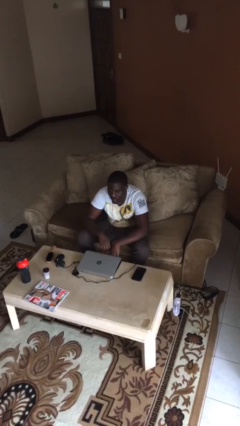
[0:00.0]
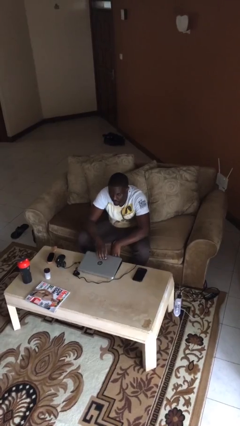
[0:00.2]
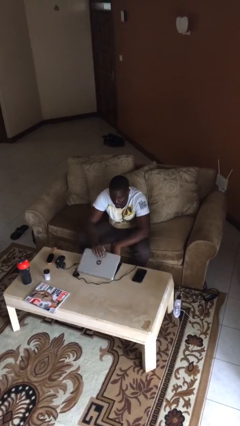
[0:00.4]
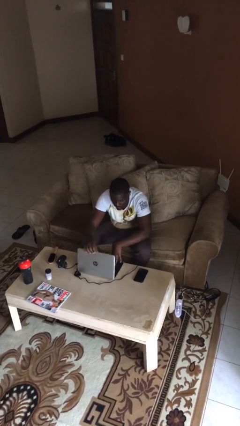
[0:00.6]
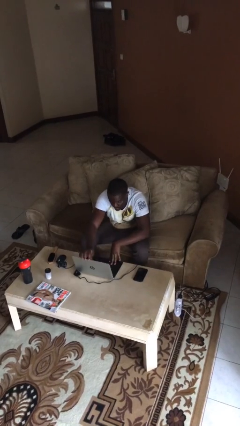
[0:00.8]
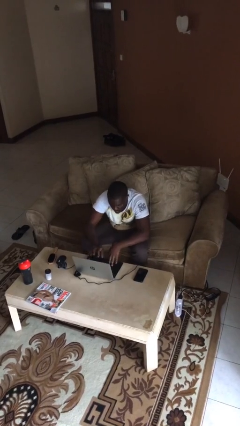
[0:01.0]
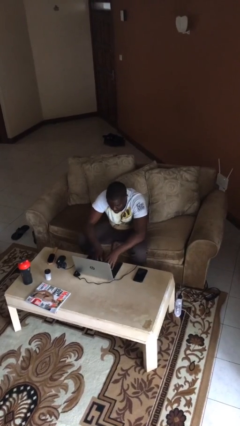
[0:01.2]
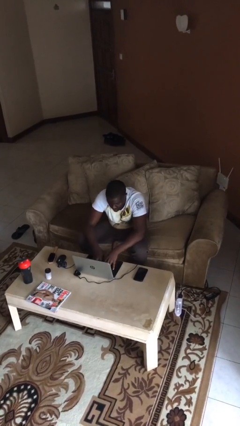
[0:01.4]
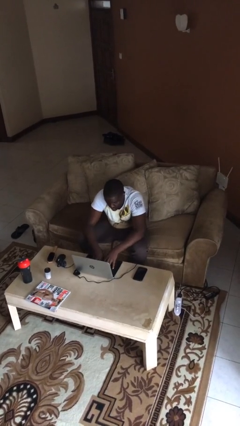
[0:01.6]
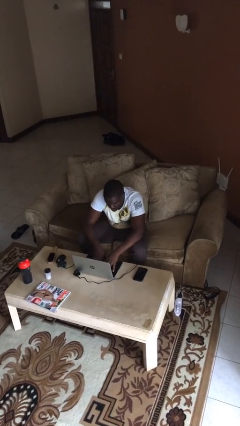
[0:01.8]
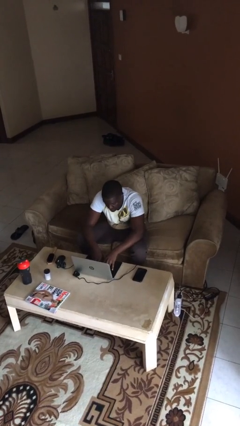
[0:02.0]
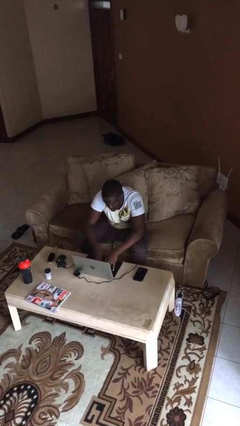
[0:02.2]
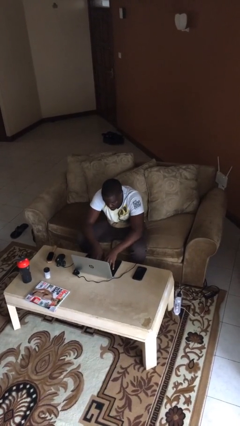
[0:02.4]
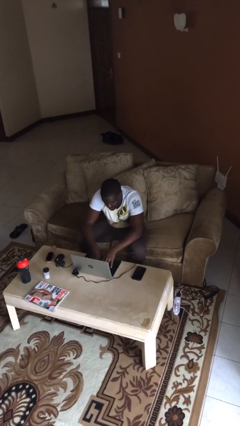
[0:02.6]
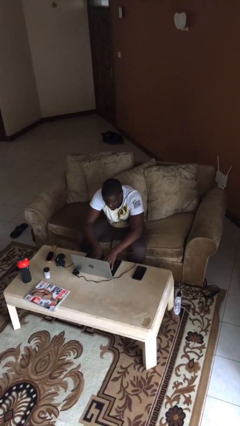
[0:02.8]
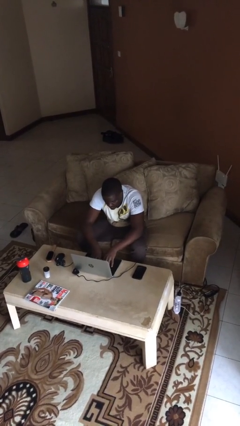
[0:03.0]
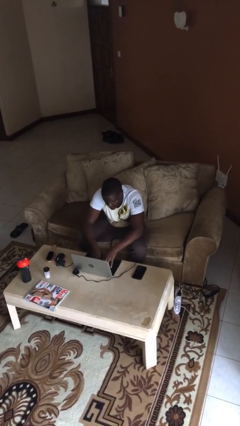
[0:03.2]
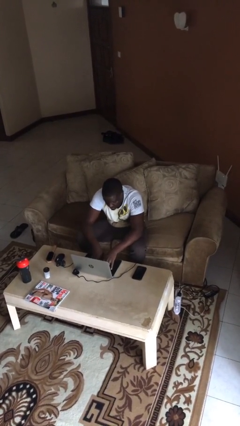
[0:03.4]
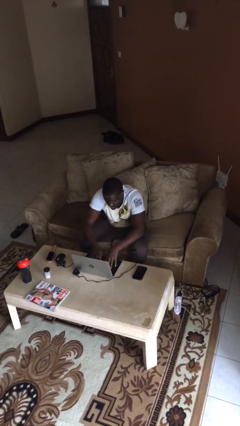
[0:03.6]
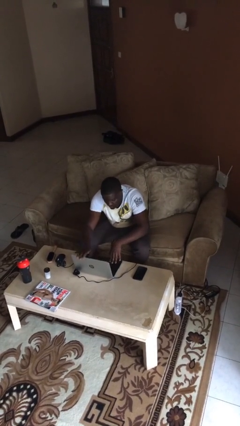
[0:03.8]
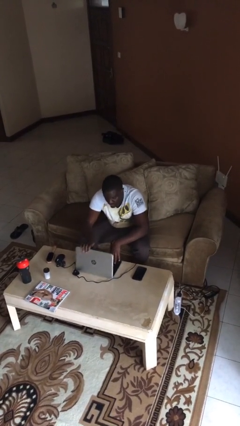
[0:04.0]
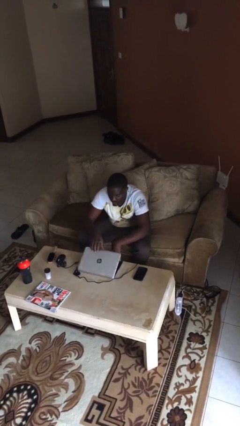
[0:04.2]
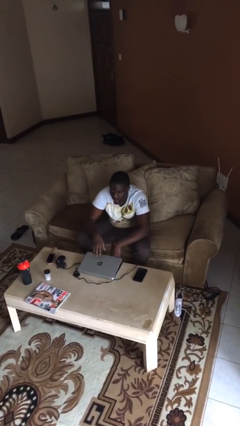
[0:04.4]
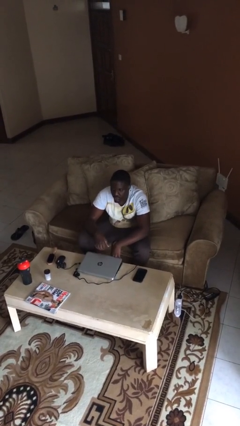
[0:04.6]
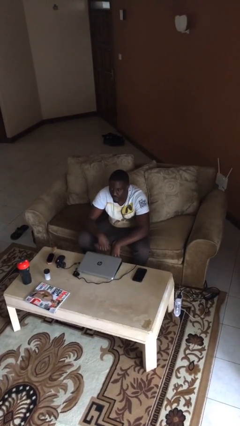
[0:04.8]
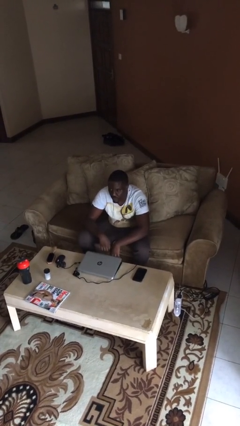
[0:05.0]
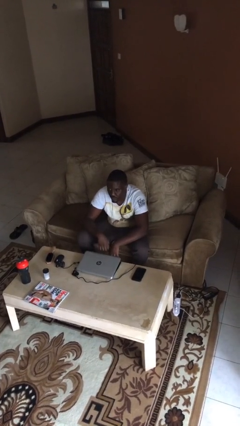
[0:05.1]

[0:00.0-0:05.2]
person interacts with laptop

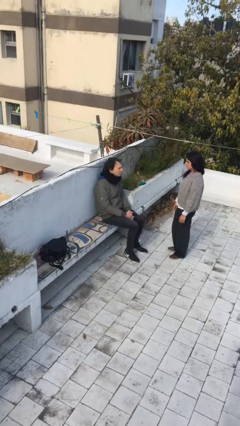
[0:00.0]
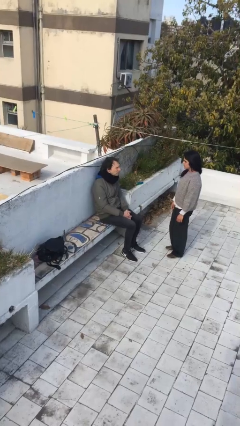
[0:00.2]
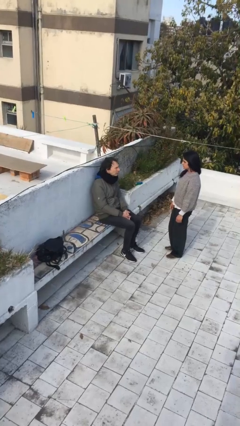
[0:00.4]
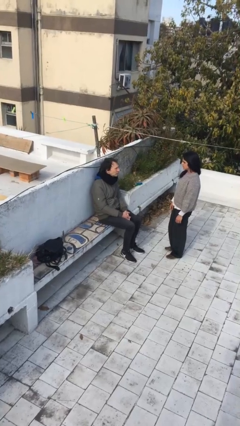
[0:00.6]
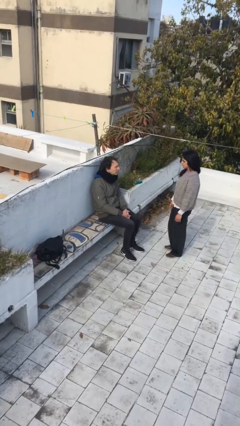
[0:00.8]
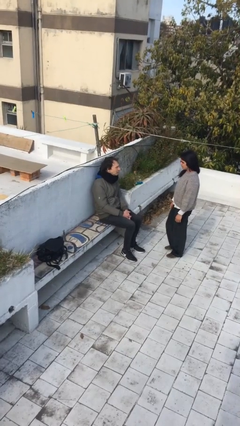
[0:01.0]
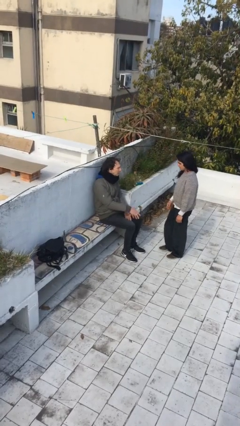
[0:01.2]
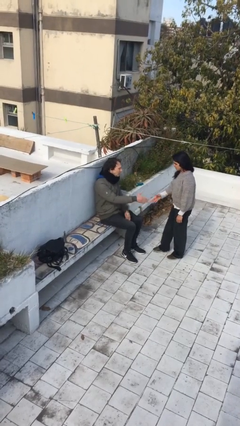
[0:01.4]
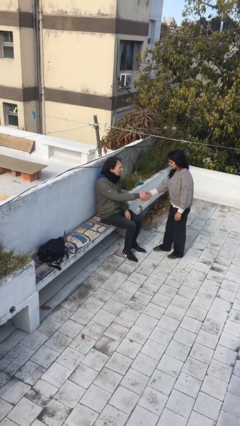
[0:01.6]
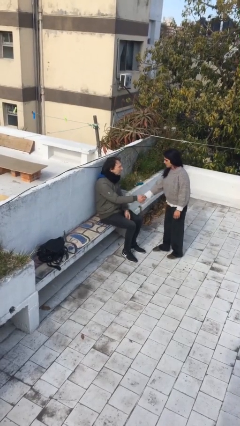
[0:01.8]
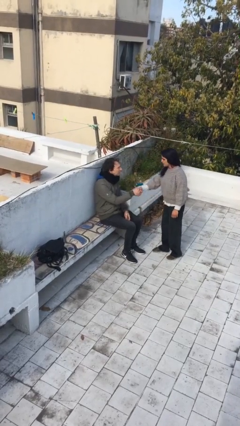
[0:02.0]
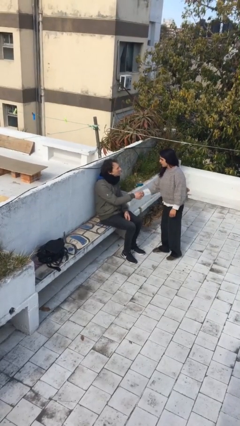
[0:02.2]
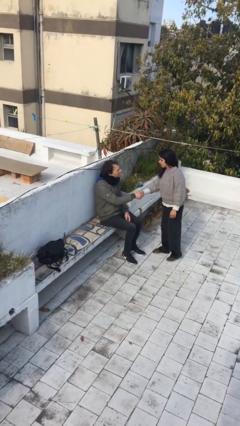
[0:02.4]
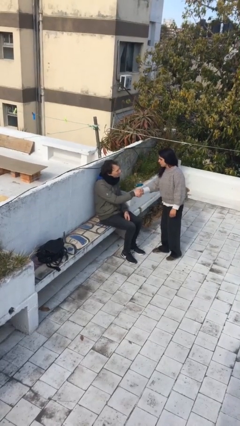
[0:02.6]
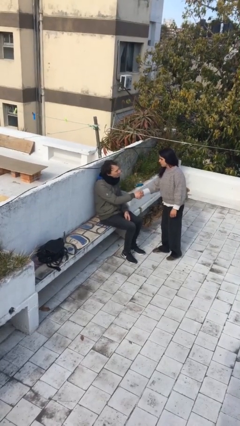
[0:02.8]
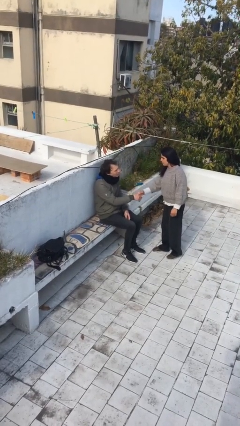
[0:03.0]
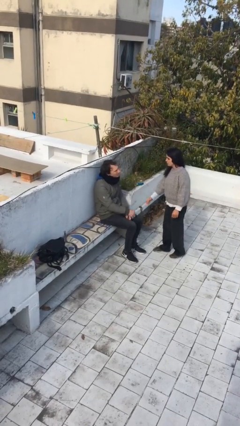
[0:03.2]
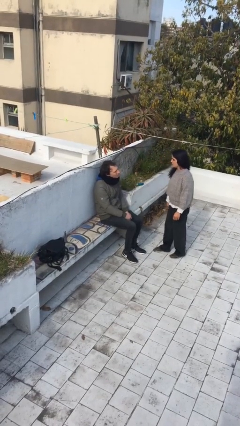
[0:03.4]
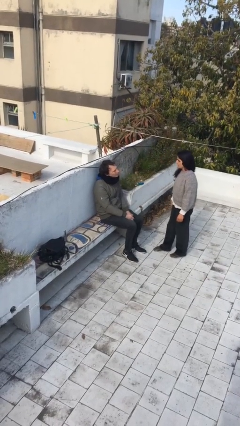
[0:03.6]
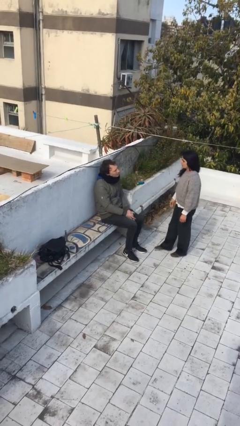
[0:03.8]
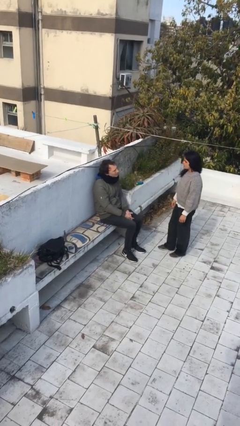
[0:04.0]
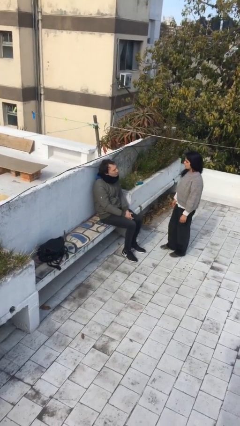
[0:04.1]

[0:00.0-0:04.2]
person shakes hand

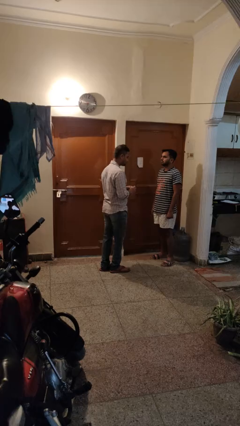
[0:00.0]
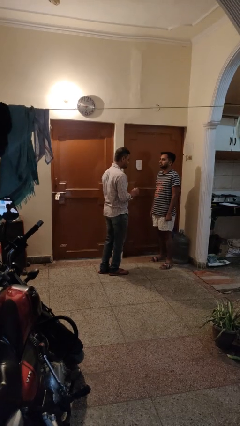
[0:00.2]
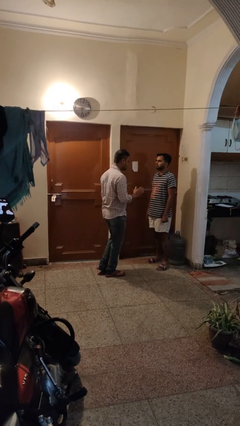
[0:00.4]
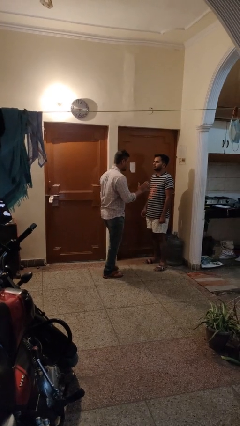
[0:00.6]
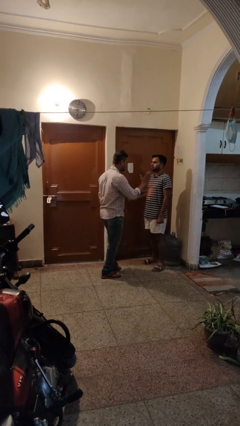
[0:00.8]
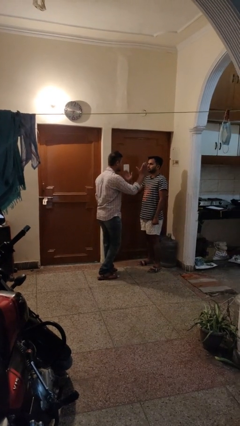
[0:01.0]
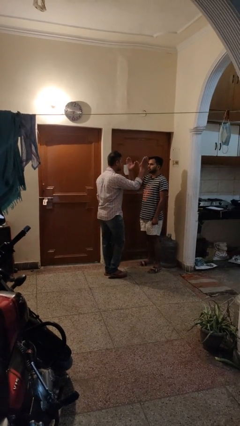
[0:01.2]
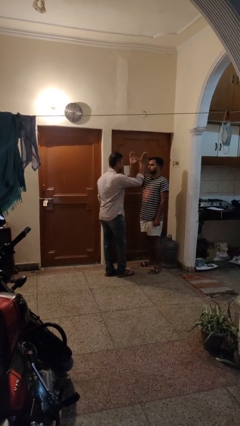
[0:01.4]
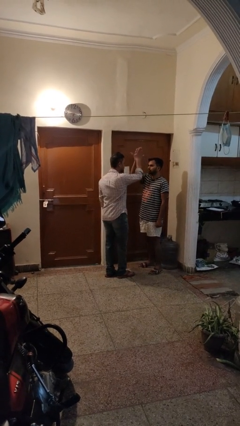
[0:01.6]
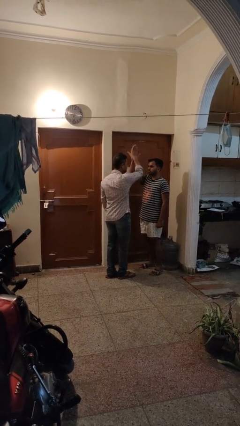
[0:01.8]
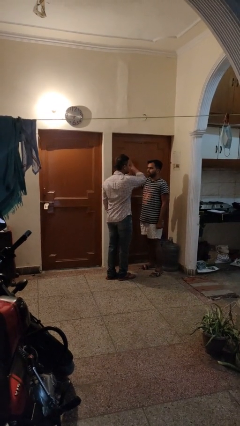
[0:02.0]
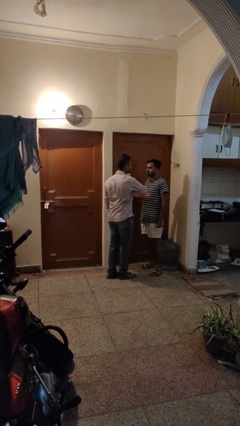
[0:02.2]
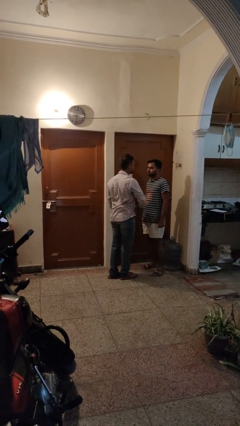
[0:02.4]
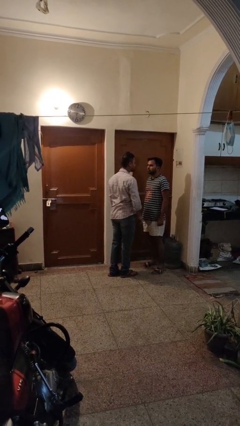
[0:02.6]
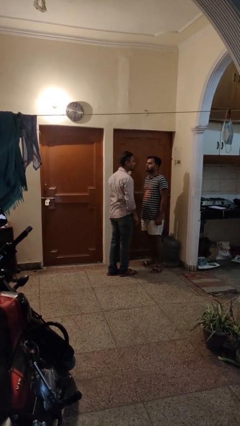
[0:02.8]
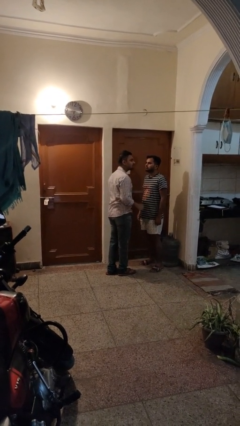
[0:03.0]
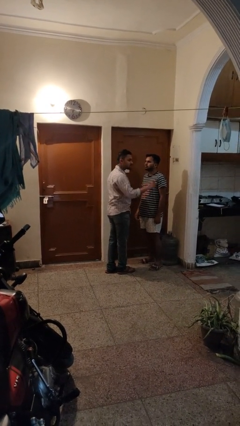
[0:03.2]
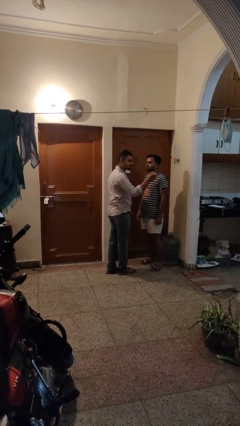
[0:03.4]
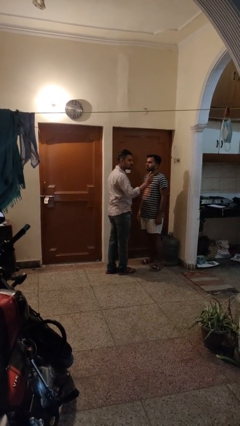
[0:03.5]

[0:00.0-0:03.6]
person highfives hand

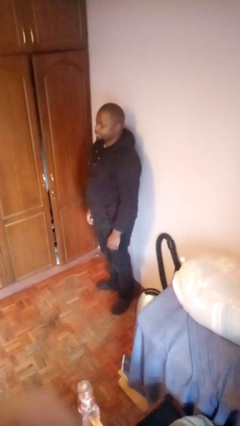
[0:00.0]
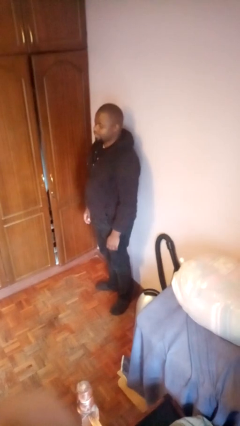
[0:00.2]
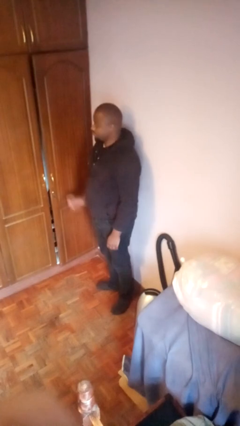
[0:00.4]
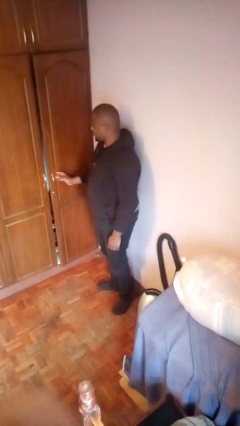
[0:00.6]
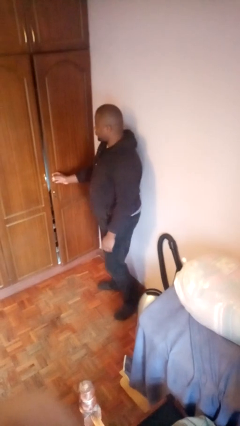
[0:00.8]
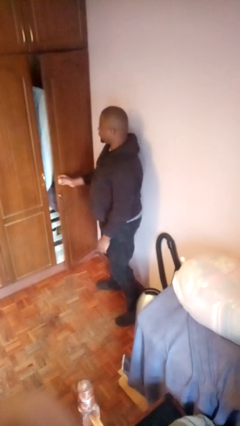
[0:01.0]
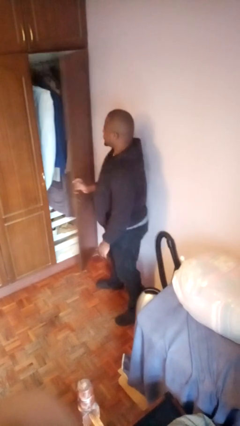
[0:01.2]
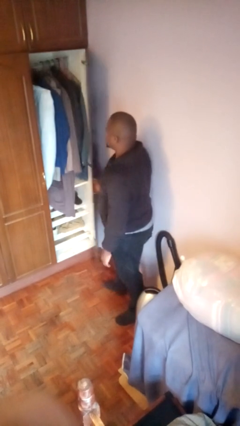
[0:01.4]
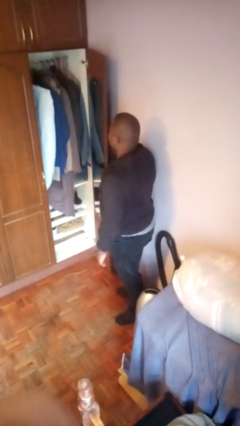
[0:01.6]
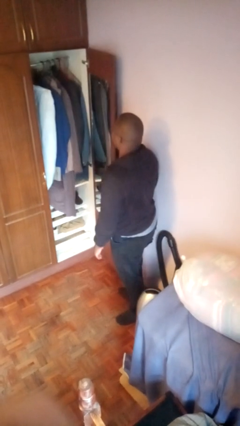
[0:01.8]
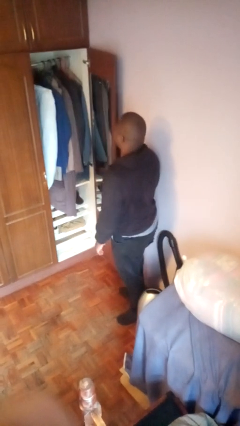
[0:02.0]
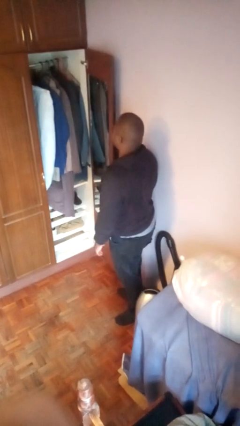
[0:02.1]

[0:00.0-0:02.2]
person opens closet door

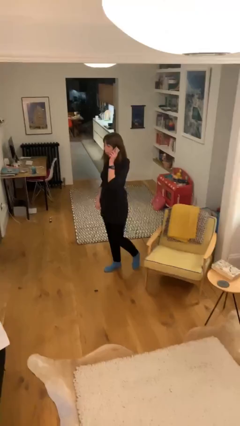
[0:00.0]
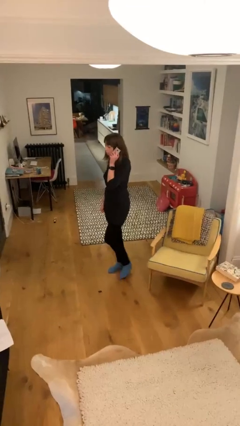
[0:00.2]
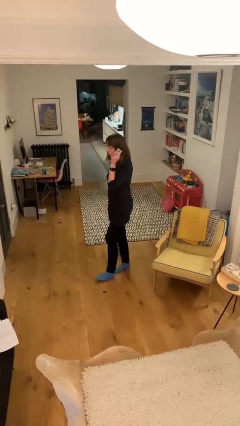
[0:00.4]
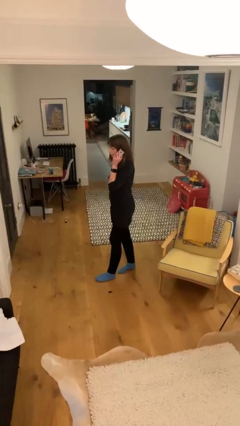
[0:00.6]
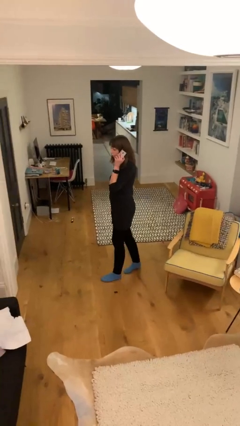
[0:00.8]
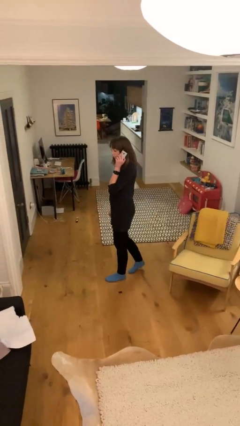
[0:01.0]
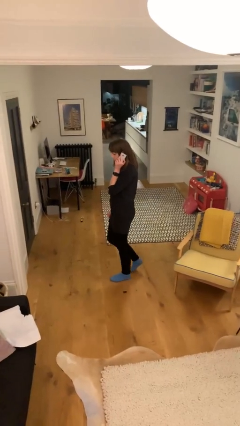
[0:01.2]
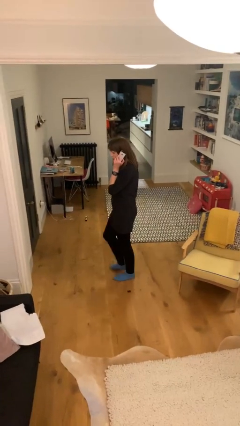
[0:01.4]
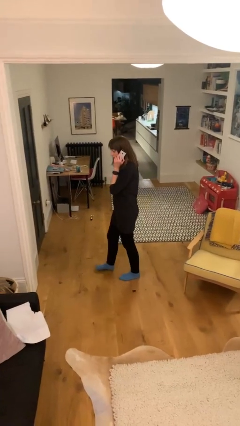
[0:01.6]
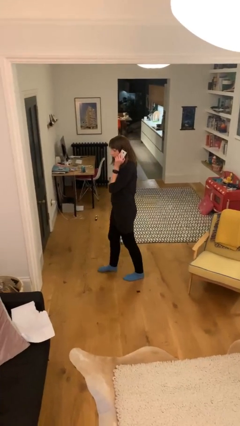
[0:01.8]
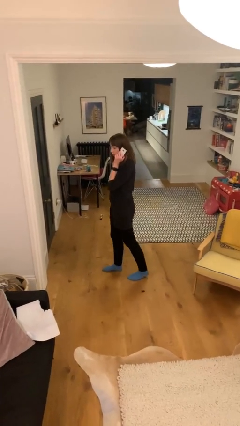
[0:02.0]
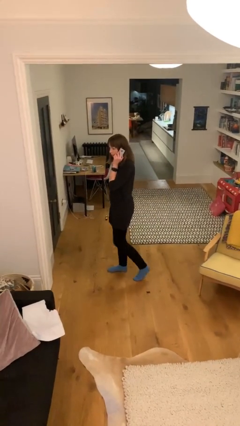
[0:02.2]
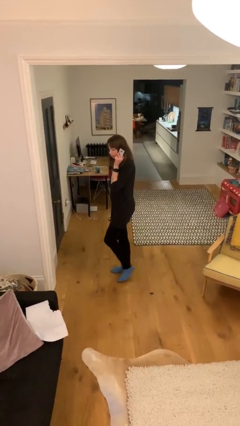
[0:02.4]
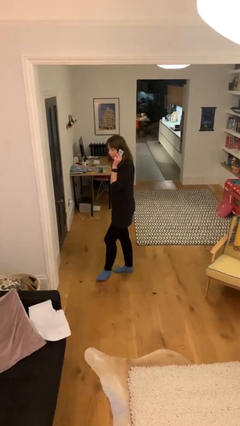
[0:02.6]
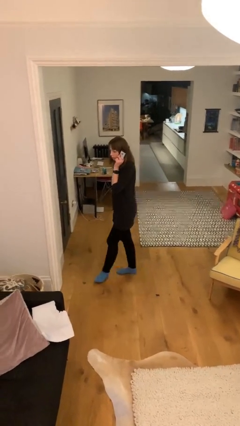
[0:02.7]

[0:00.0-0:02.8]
person talks on phone
